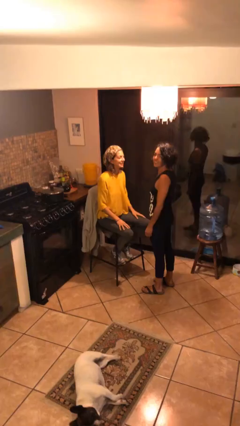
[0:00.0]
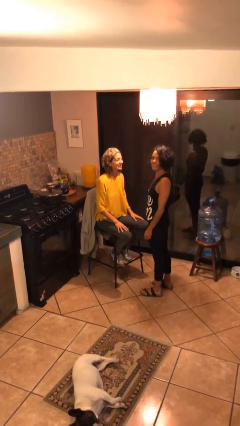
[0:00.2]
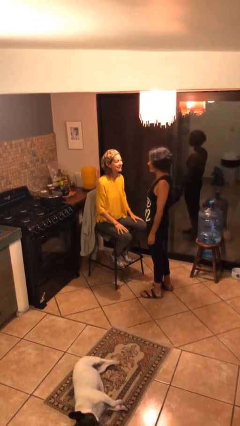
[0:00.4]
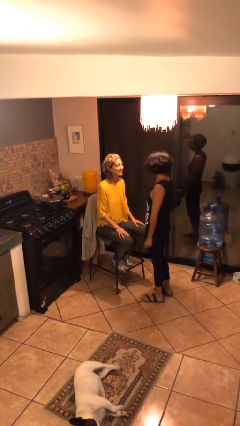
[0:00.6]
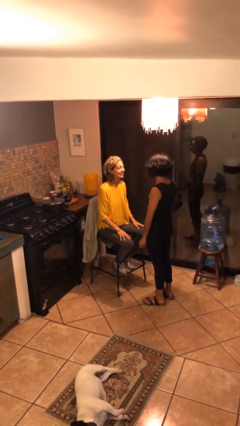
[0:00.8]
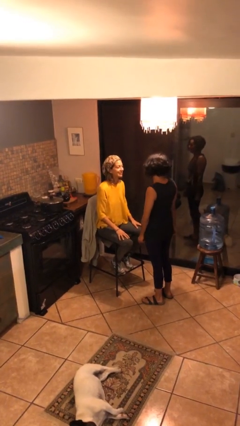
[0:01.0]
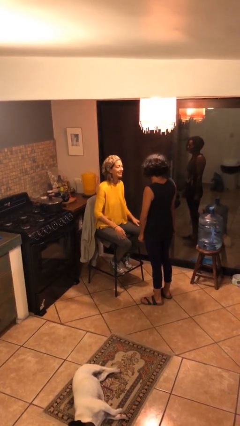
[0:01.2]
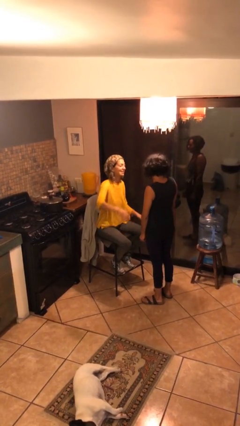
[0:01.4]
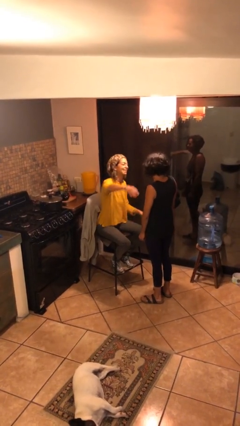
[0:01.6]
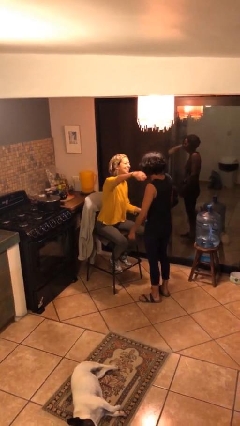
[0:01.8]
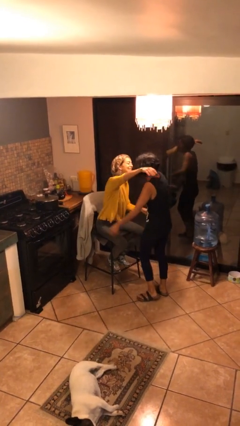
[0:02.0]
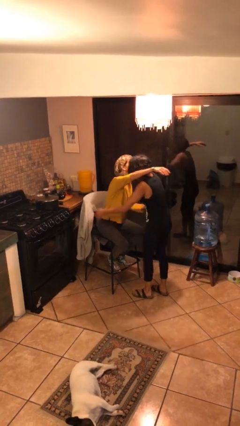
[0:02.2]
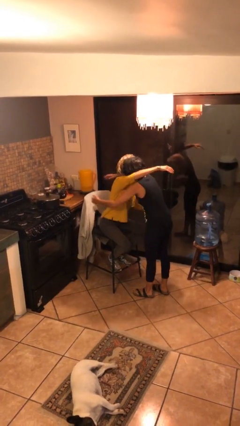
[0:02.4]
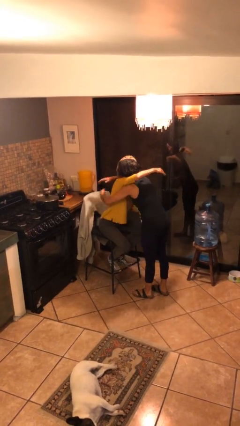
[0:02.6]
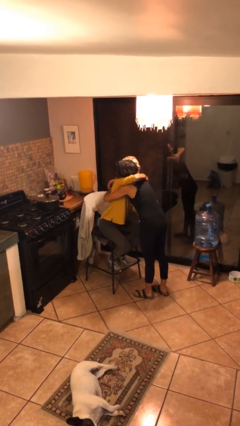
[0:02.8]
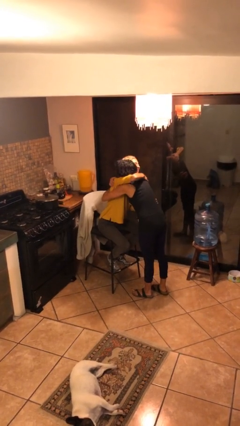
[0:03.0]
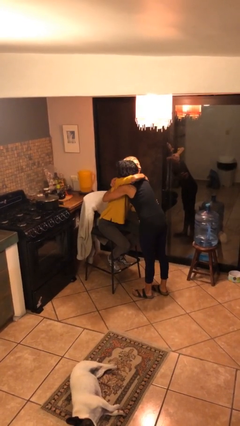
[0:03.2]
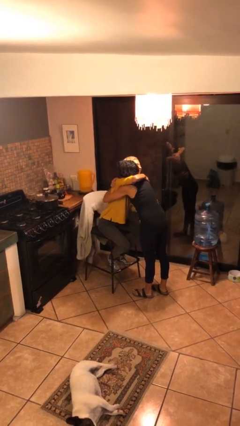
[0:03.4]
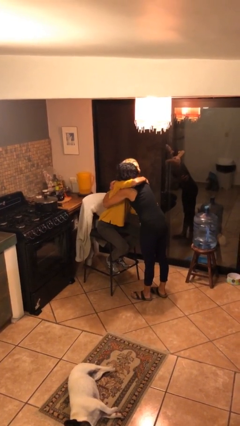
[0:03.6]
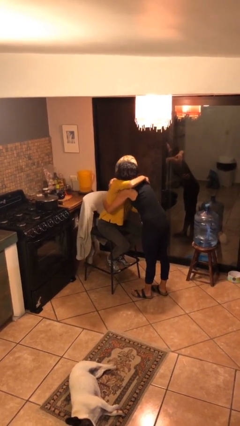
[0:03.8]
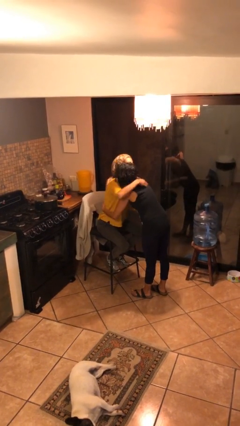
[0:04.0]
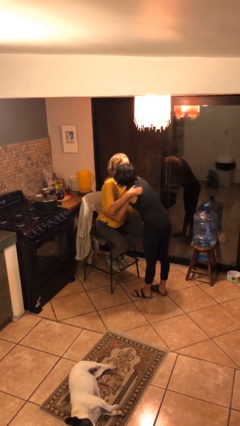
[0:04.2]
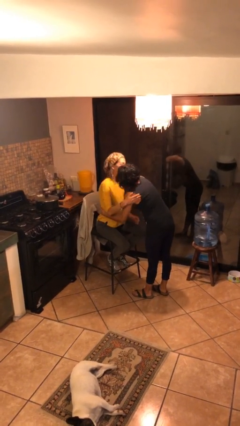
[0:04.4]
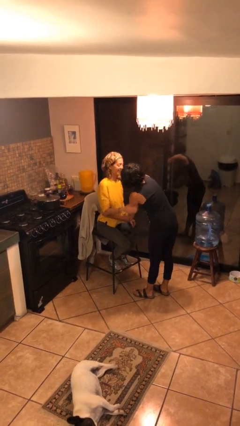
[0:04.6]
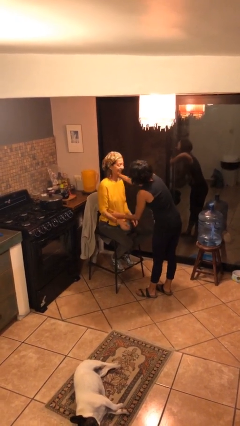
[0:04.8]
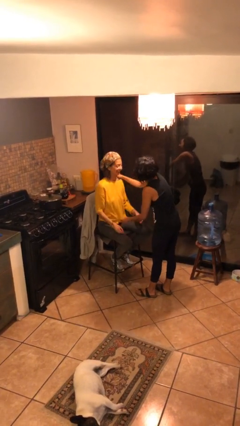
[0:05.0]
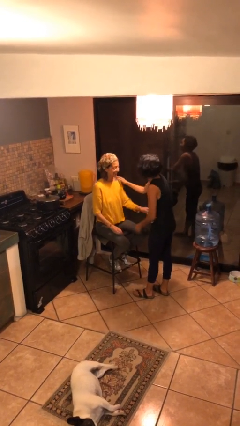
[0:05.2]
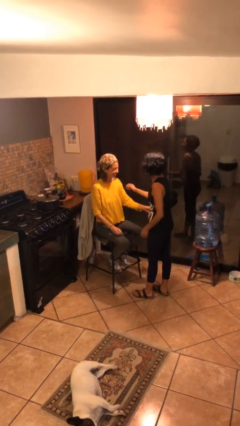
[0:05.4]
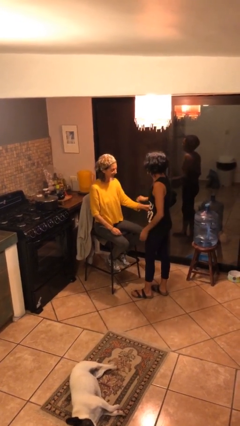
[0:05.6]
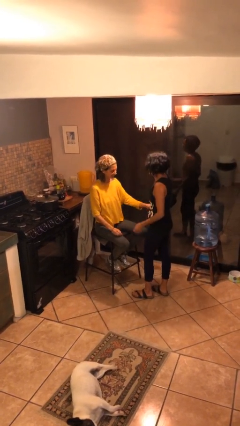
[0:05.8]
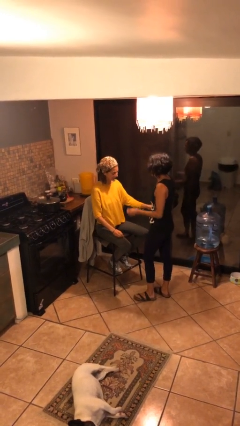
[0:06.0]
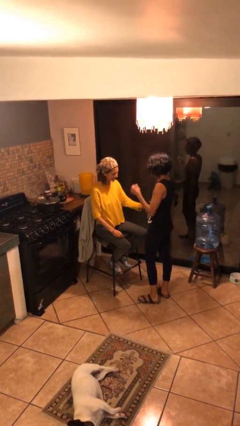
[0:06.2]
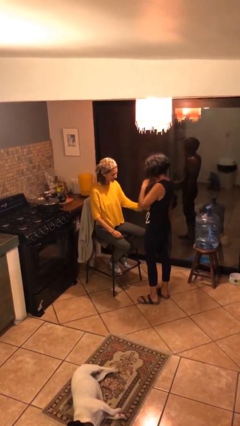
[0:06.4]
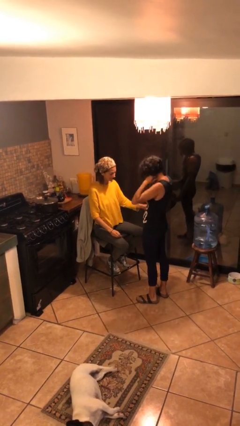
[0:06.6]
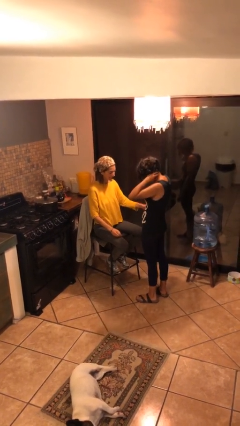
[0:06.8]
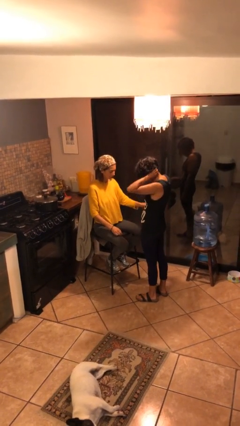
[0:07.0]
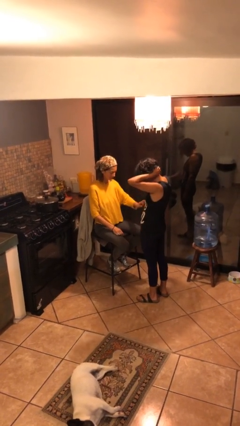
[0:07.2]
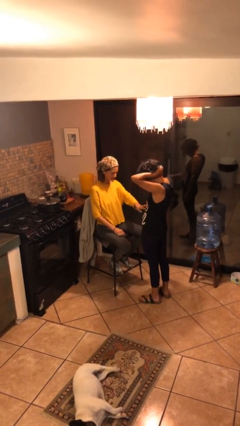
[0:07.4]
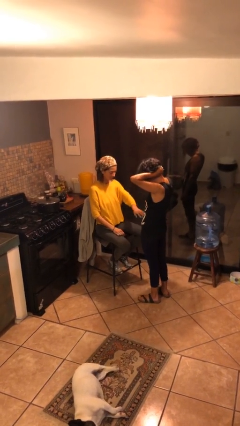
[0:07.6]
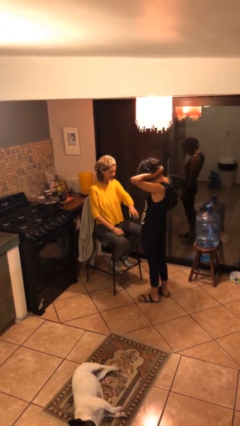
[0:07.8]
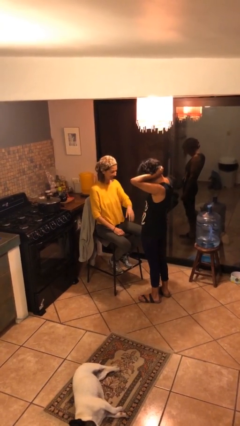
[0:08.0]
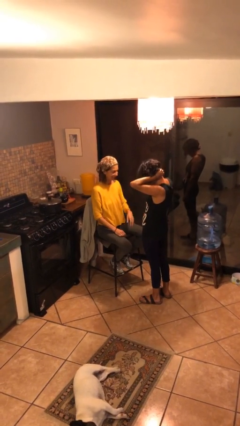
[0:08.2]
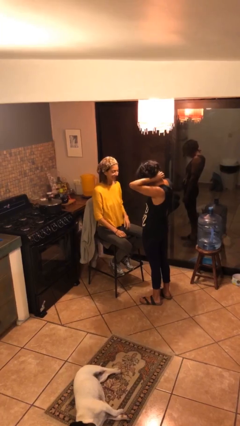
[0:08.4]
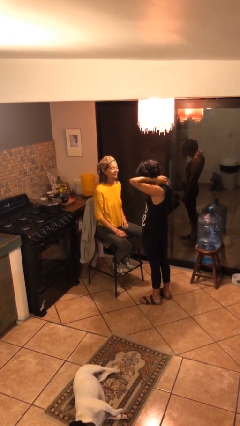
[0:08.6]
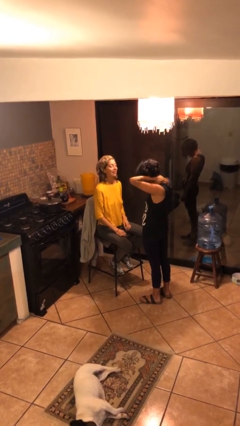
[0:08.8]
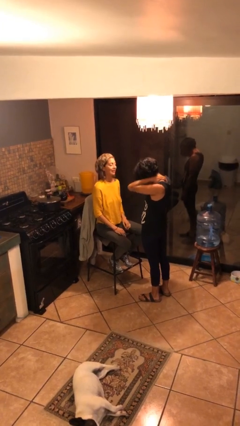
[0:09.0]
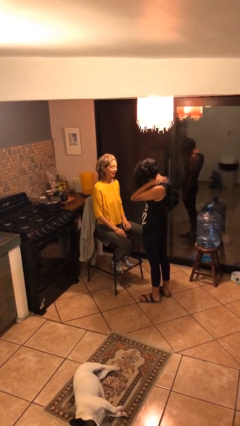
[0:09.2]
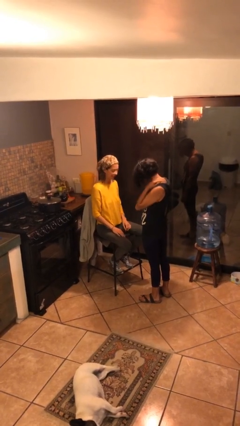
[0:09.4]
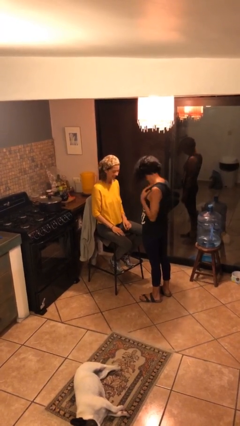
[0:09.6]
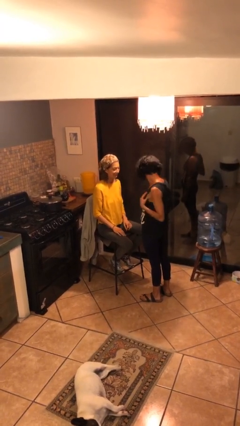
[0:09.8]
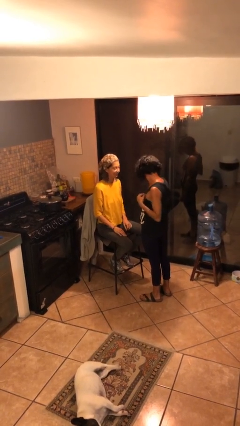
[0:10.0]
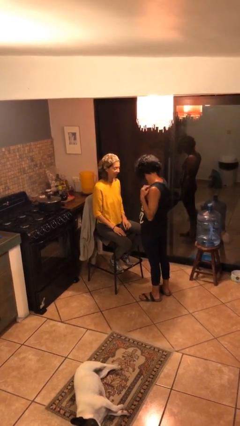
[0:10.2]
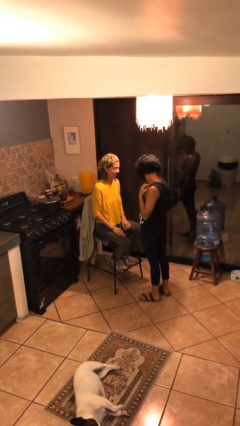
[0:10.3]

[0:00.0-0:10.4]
person embraces person

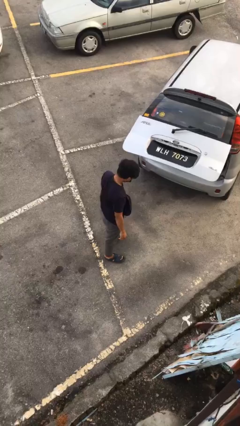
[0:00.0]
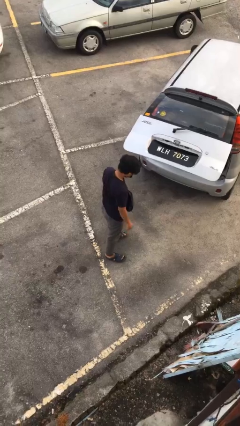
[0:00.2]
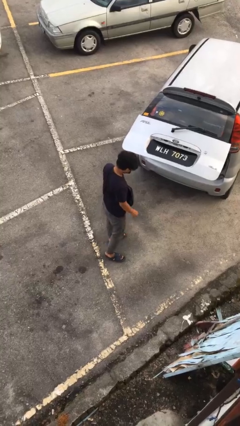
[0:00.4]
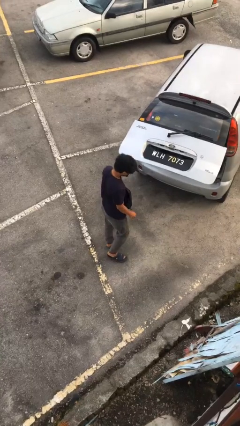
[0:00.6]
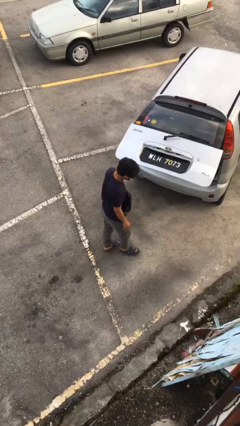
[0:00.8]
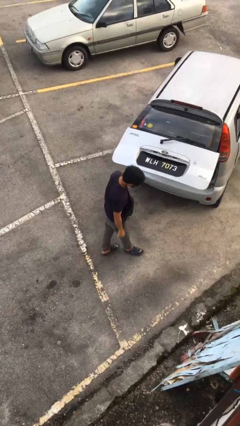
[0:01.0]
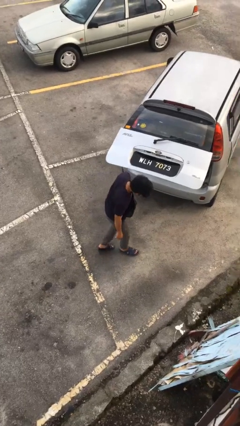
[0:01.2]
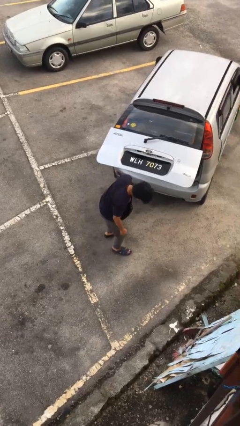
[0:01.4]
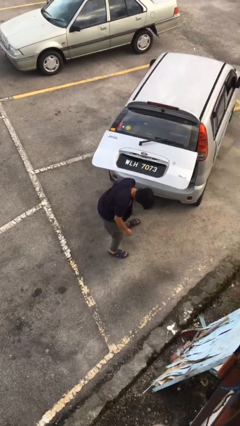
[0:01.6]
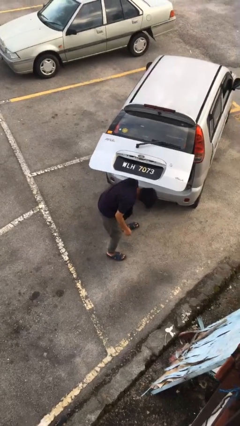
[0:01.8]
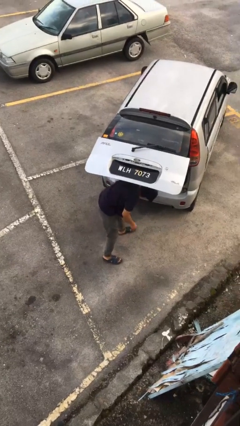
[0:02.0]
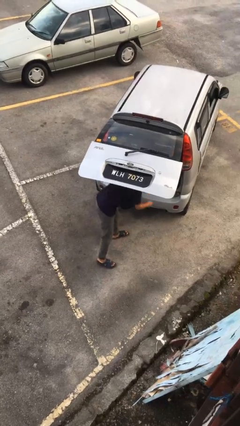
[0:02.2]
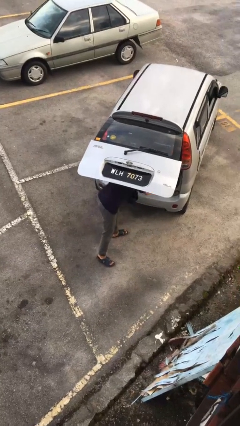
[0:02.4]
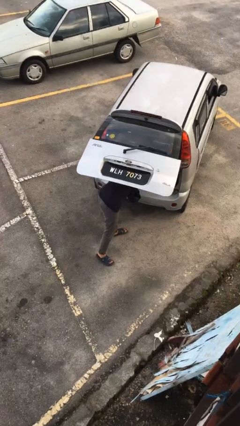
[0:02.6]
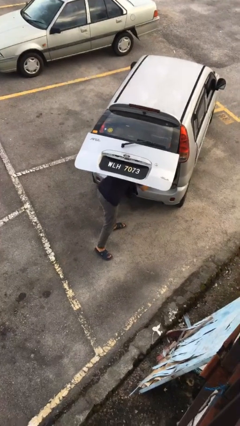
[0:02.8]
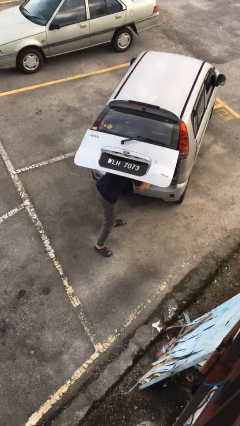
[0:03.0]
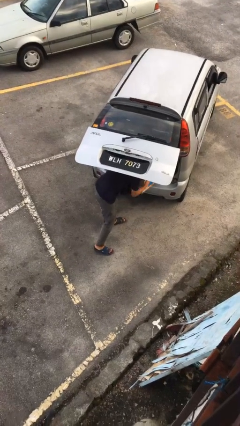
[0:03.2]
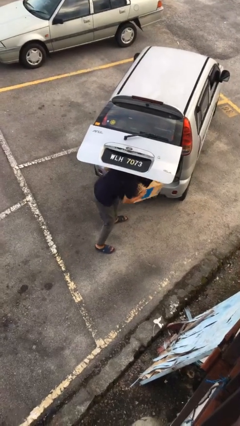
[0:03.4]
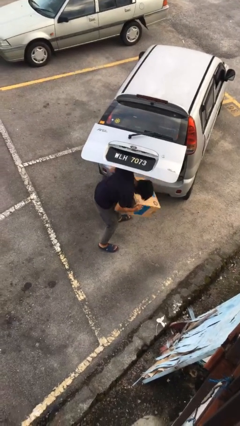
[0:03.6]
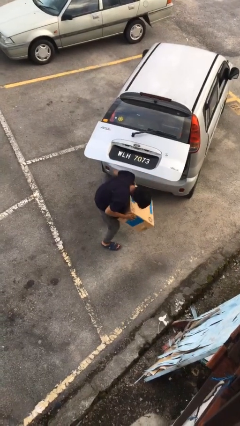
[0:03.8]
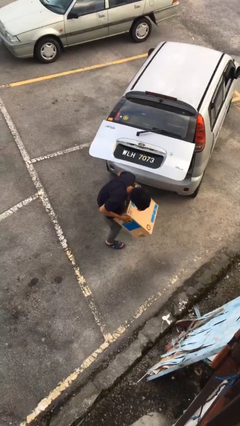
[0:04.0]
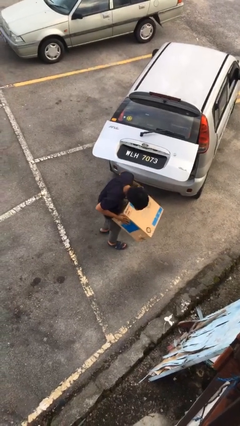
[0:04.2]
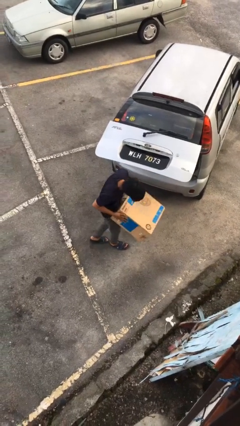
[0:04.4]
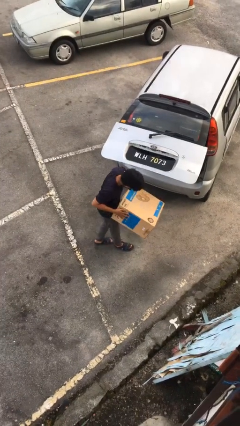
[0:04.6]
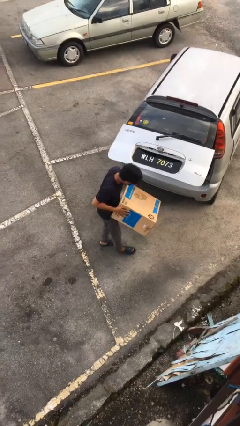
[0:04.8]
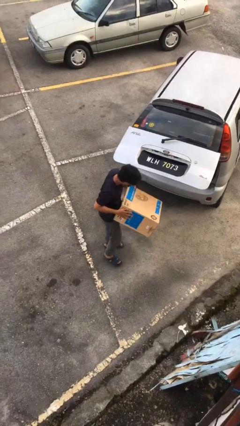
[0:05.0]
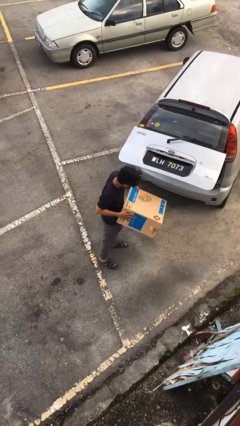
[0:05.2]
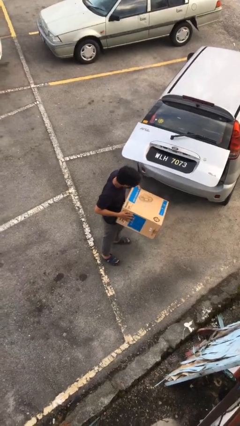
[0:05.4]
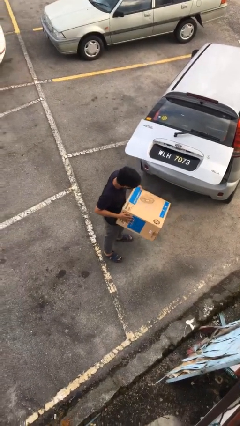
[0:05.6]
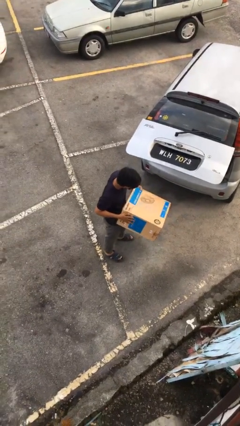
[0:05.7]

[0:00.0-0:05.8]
person unloads car

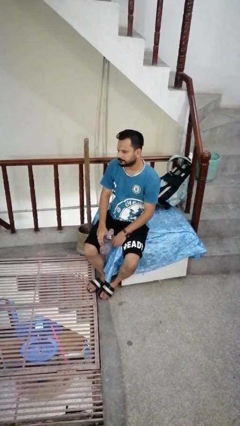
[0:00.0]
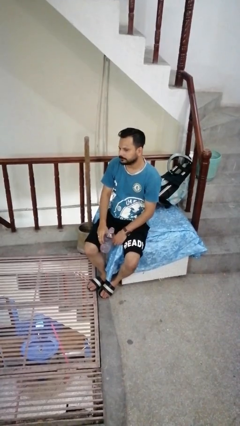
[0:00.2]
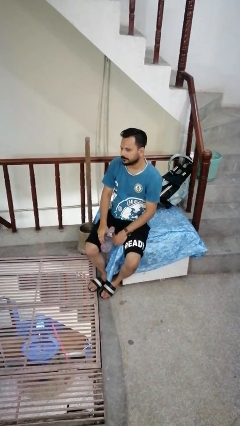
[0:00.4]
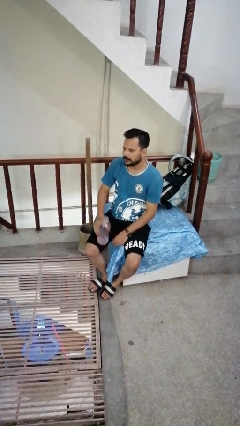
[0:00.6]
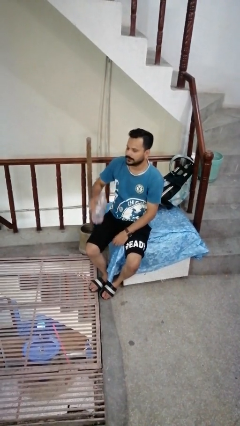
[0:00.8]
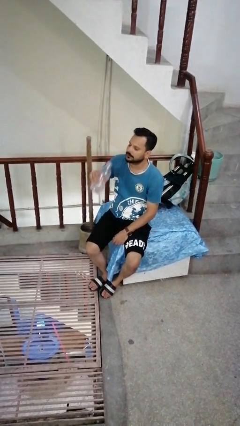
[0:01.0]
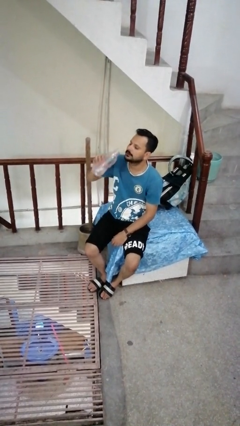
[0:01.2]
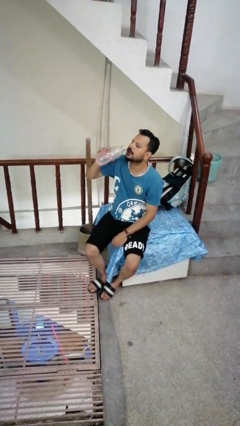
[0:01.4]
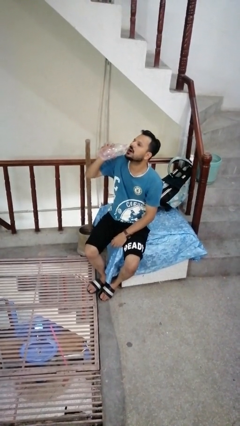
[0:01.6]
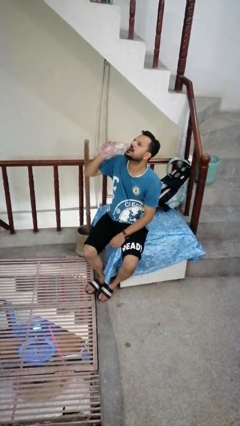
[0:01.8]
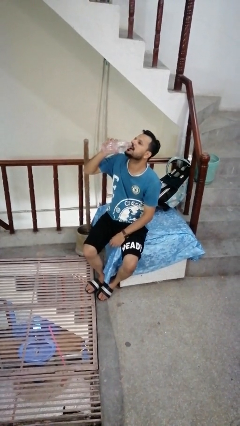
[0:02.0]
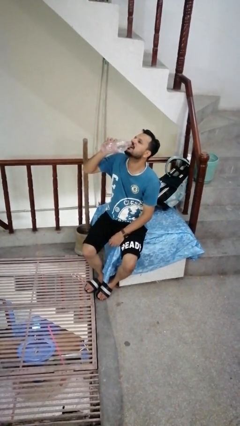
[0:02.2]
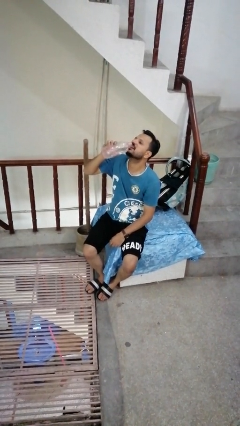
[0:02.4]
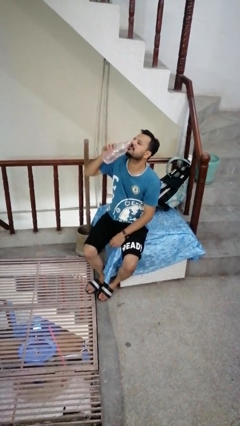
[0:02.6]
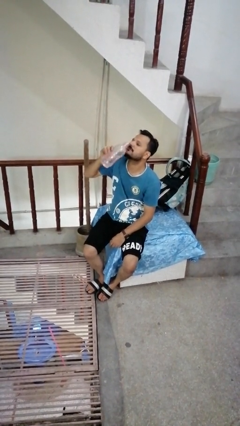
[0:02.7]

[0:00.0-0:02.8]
person drinks from bottle
